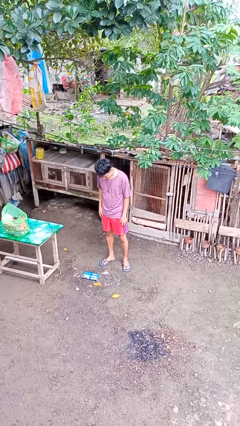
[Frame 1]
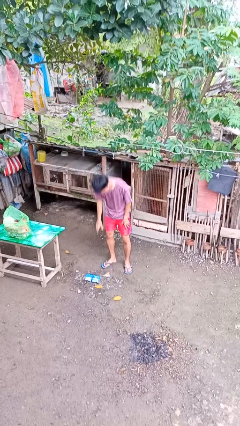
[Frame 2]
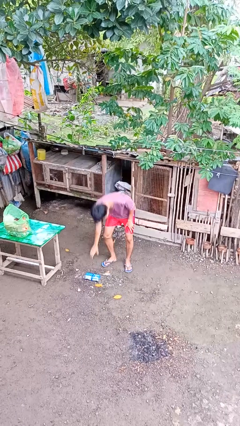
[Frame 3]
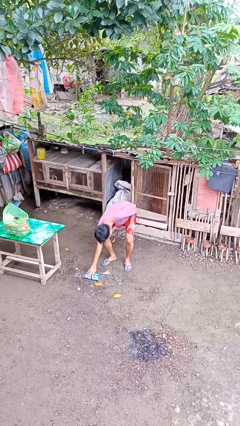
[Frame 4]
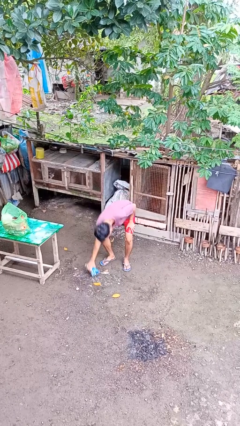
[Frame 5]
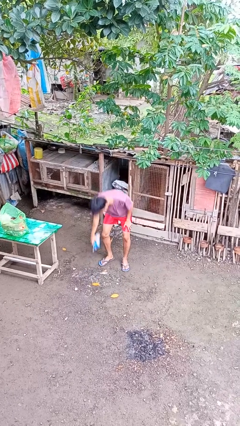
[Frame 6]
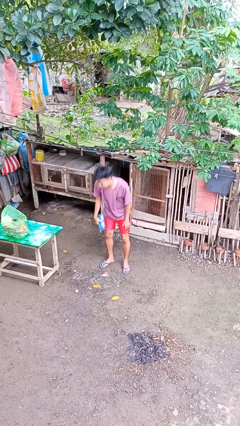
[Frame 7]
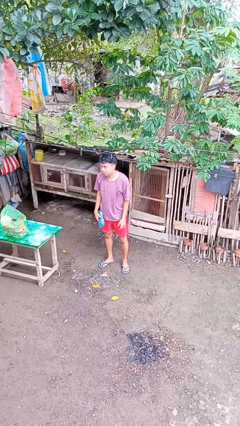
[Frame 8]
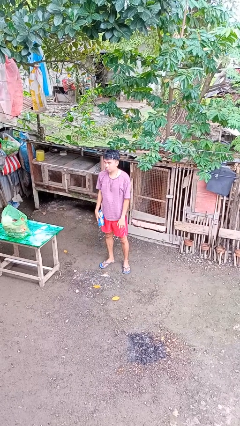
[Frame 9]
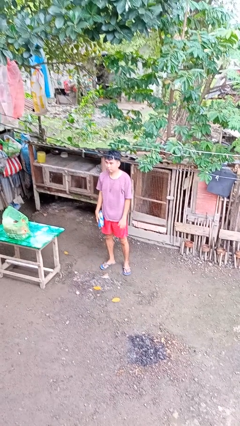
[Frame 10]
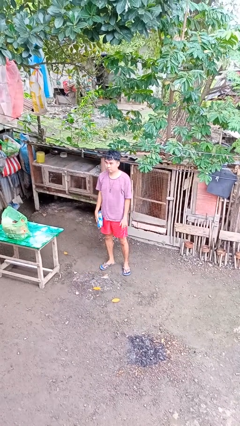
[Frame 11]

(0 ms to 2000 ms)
person picks up object from floor

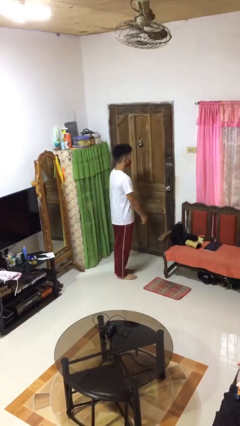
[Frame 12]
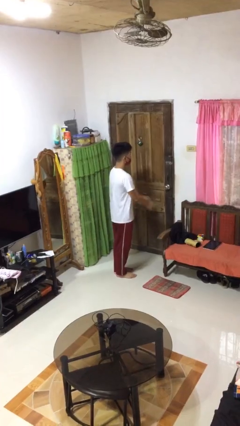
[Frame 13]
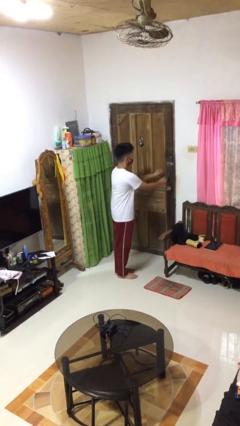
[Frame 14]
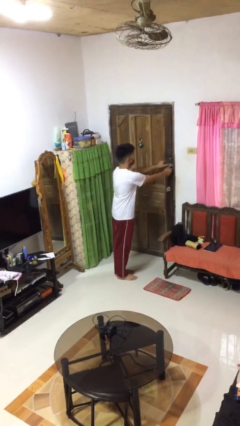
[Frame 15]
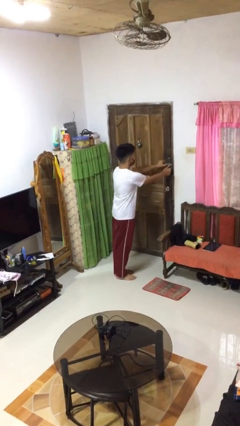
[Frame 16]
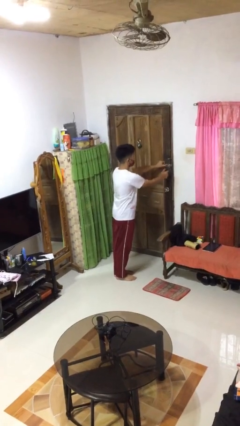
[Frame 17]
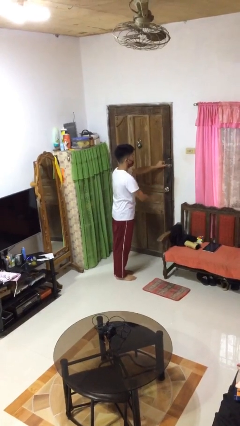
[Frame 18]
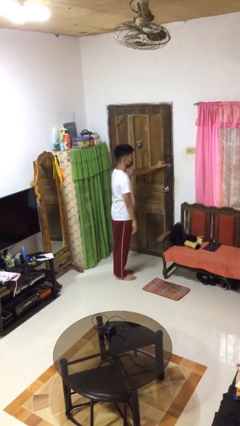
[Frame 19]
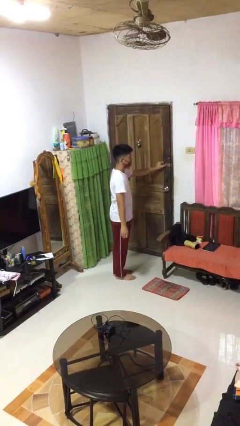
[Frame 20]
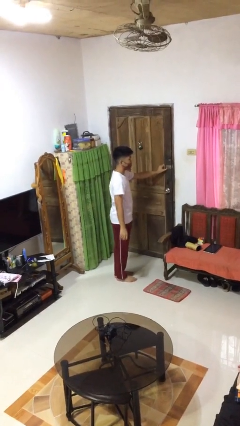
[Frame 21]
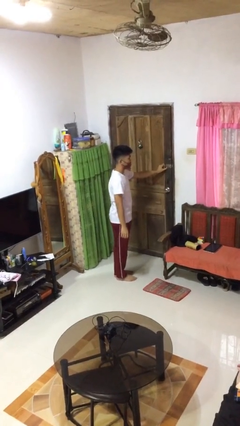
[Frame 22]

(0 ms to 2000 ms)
person unlocks door with keys

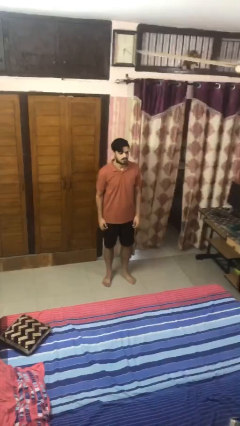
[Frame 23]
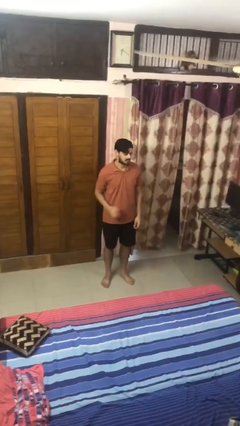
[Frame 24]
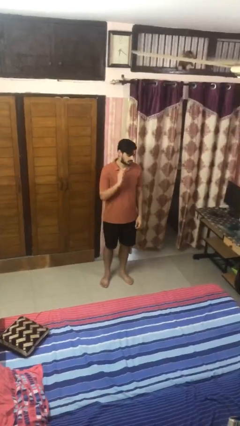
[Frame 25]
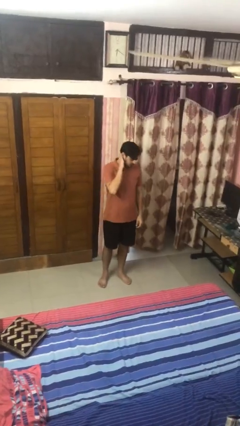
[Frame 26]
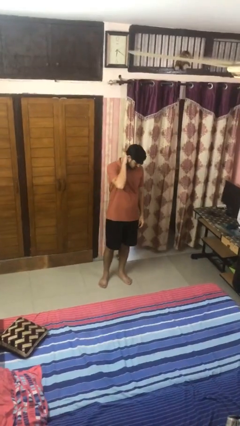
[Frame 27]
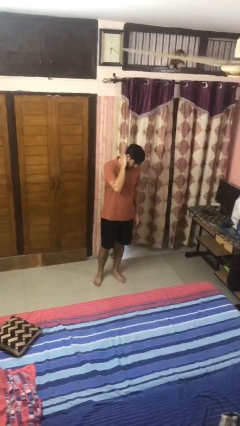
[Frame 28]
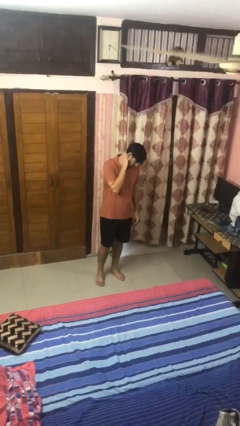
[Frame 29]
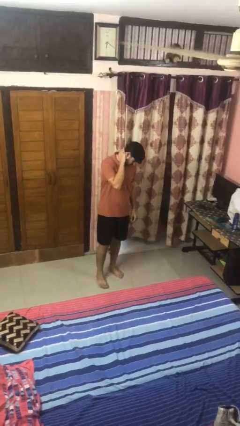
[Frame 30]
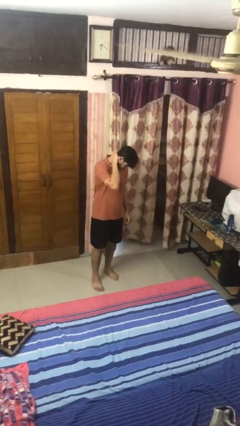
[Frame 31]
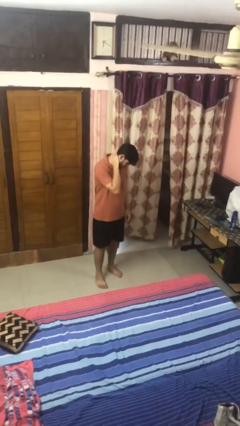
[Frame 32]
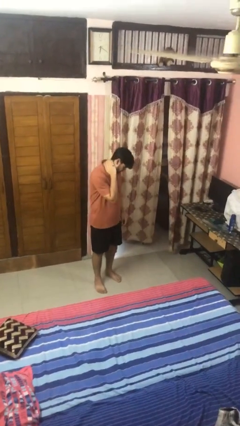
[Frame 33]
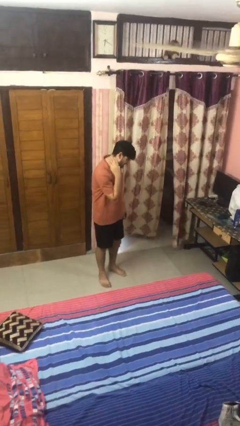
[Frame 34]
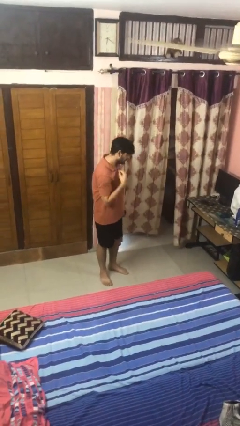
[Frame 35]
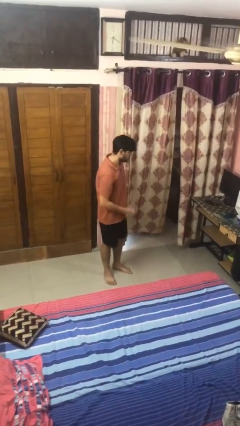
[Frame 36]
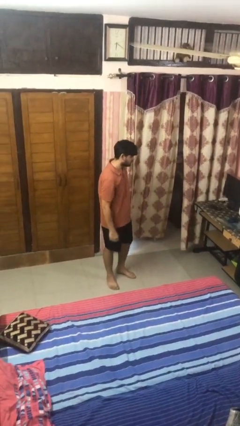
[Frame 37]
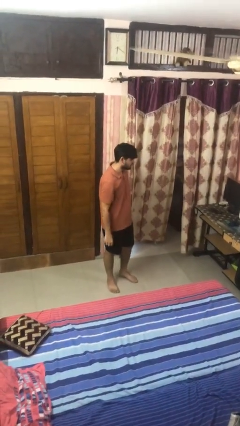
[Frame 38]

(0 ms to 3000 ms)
person rubs neck

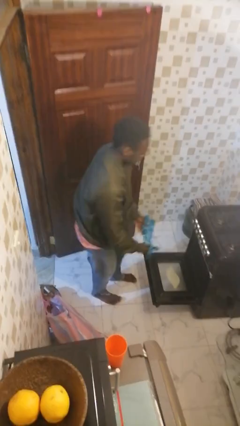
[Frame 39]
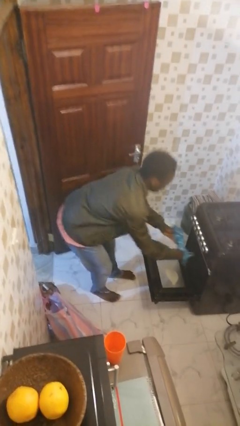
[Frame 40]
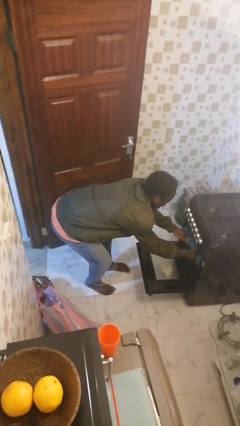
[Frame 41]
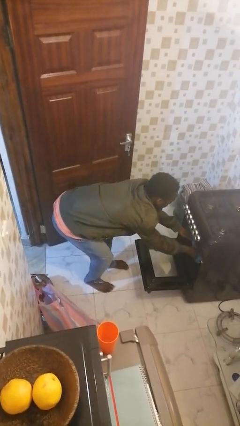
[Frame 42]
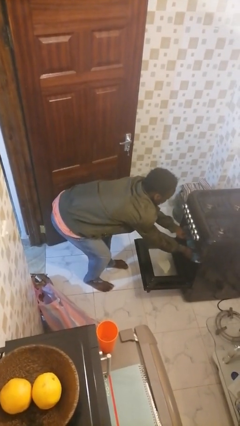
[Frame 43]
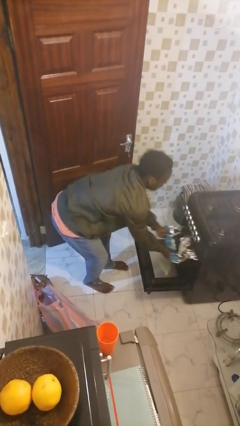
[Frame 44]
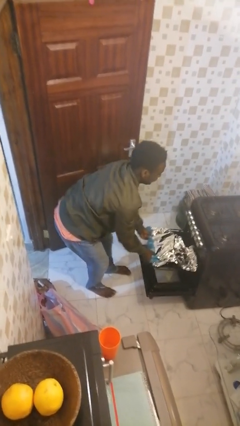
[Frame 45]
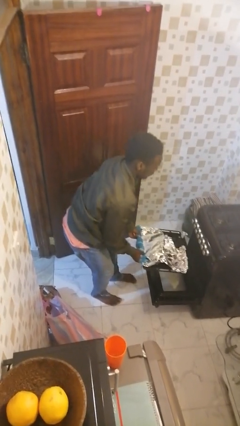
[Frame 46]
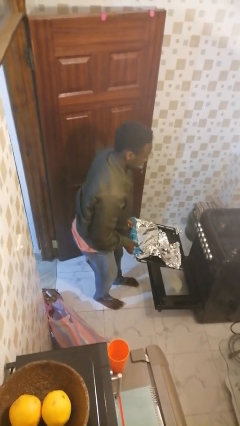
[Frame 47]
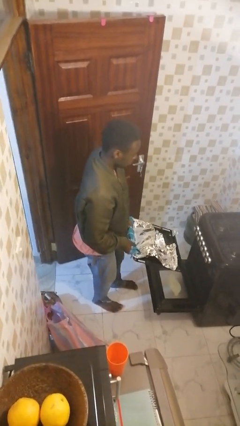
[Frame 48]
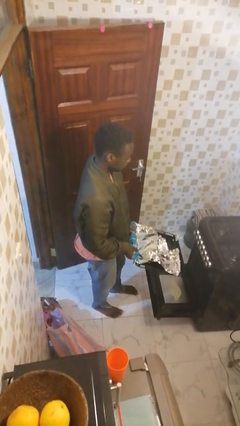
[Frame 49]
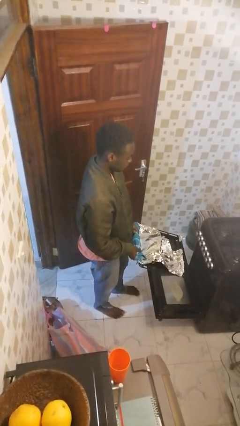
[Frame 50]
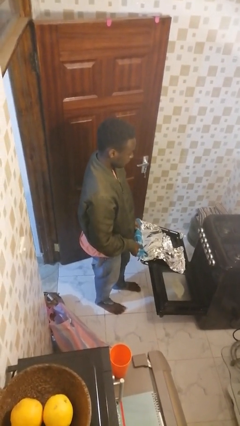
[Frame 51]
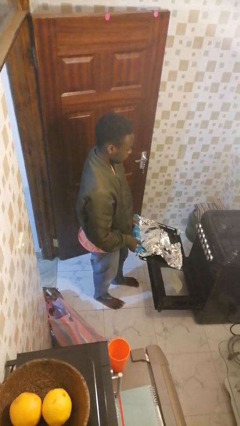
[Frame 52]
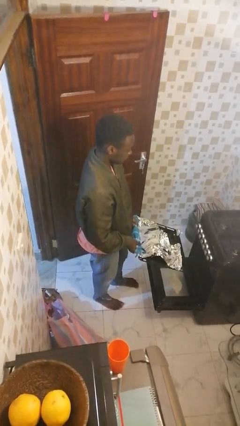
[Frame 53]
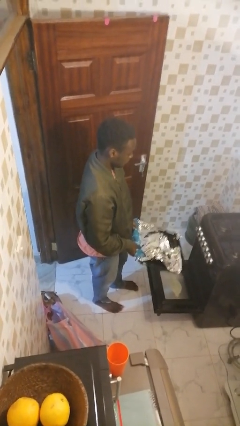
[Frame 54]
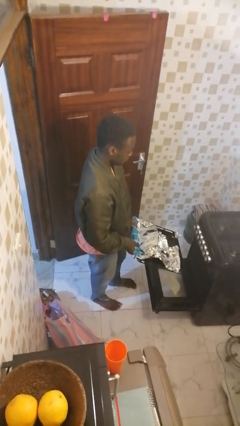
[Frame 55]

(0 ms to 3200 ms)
person takes object from oven

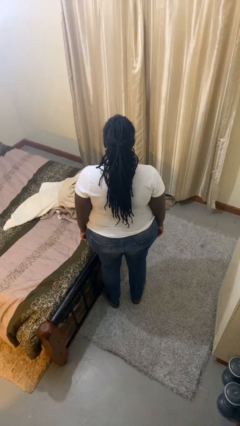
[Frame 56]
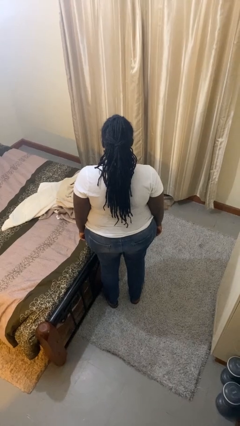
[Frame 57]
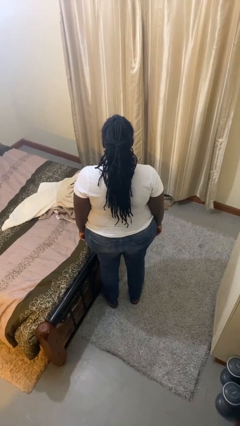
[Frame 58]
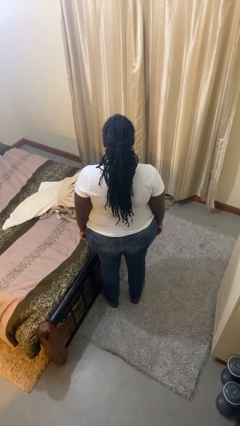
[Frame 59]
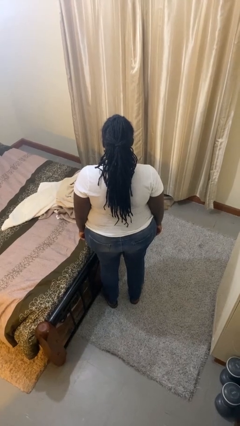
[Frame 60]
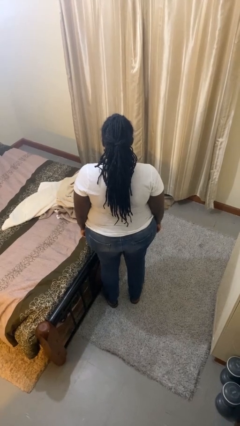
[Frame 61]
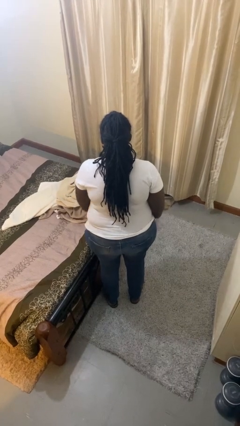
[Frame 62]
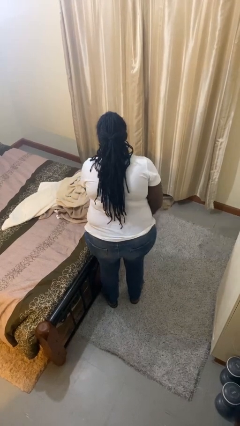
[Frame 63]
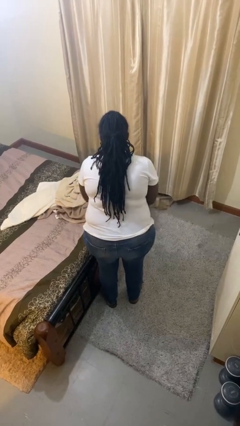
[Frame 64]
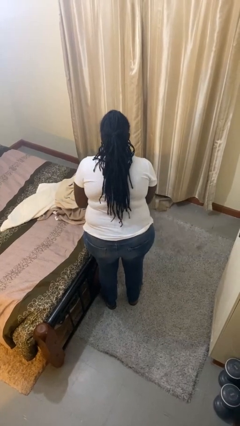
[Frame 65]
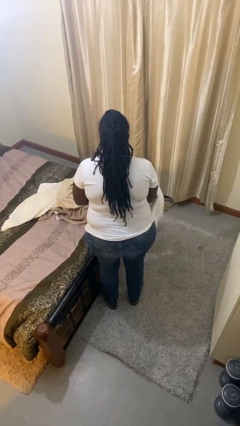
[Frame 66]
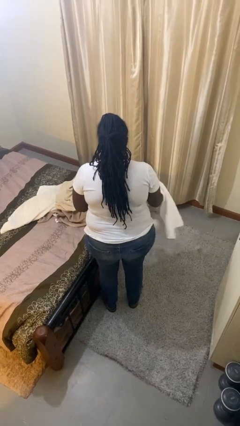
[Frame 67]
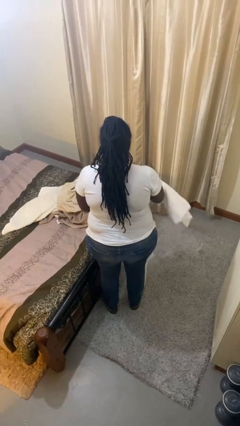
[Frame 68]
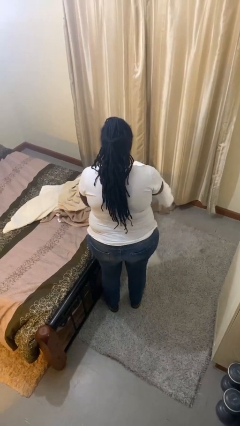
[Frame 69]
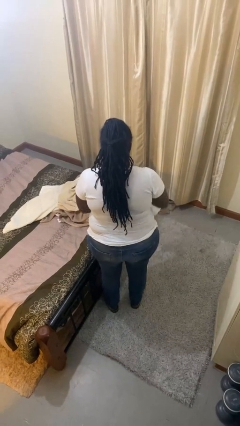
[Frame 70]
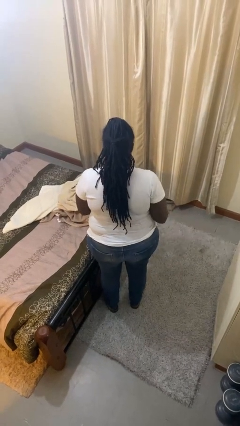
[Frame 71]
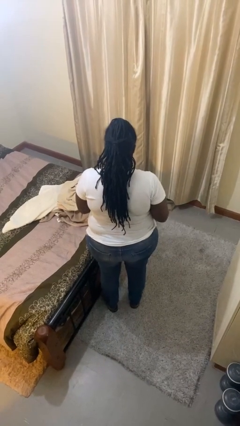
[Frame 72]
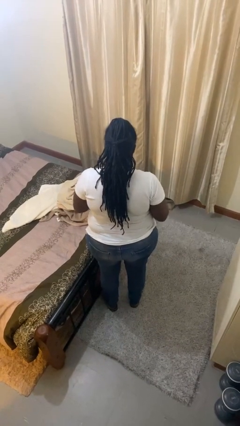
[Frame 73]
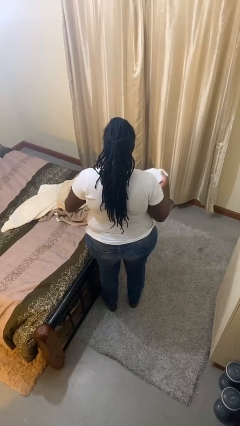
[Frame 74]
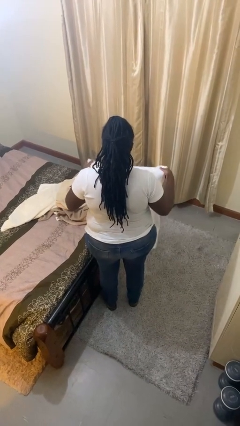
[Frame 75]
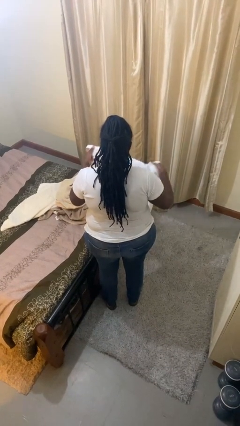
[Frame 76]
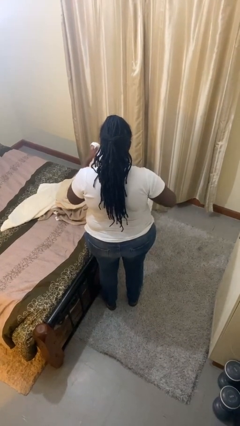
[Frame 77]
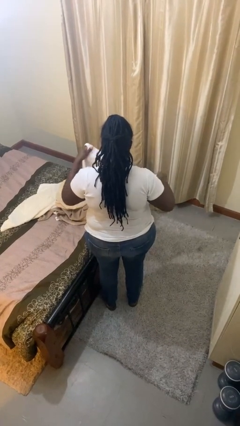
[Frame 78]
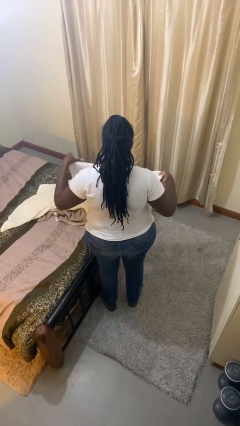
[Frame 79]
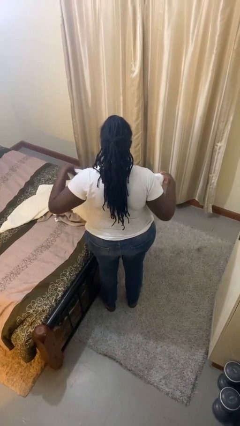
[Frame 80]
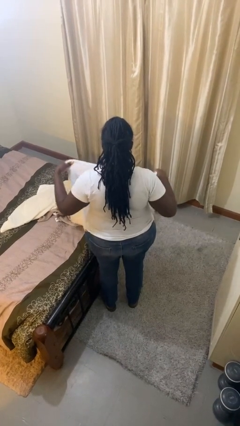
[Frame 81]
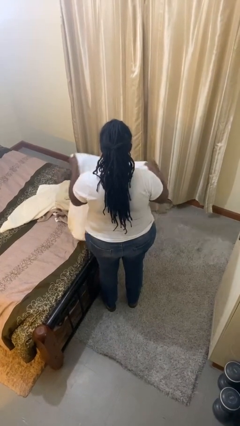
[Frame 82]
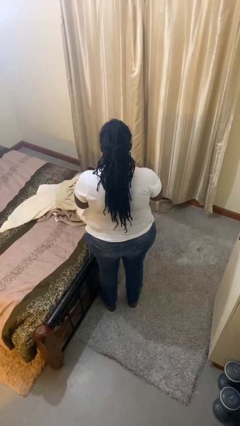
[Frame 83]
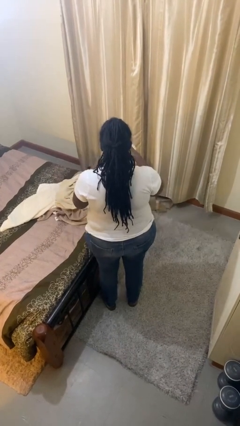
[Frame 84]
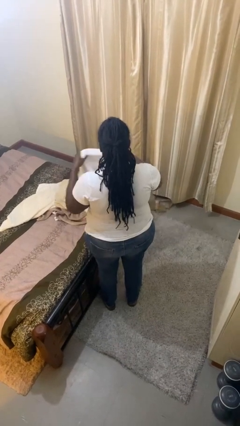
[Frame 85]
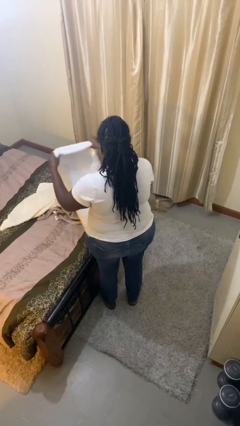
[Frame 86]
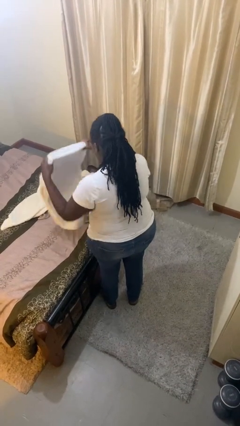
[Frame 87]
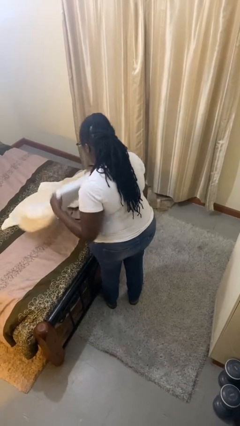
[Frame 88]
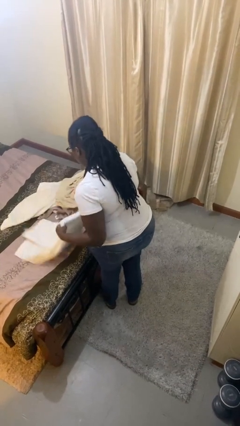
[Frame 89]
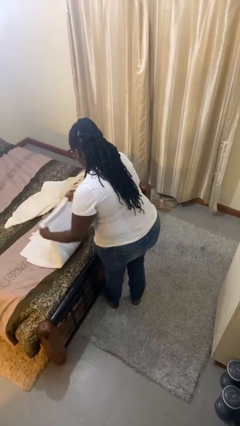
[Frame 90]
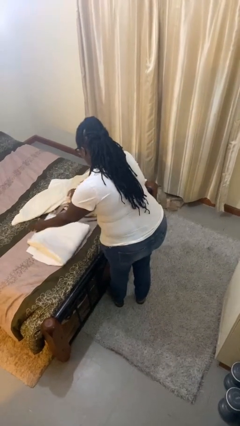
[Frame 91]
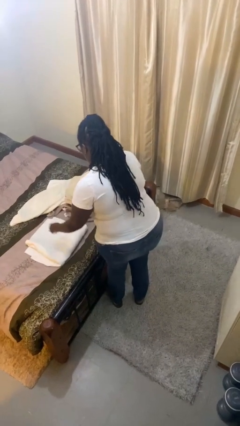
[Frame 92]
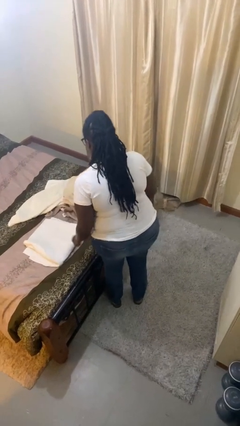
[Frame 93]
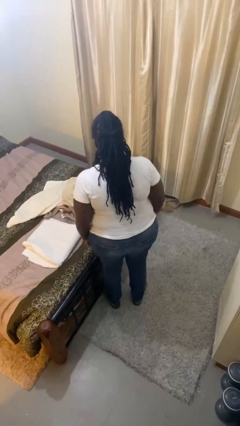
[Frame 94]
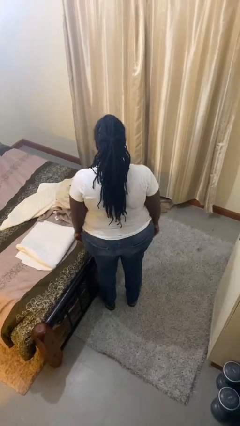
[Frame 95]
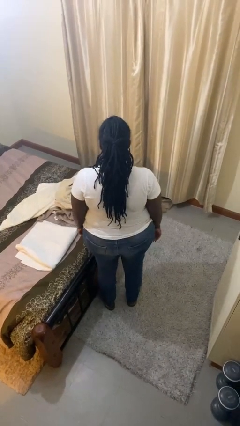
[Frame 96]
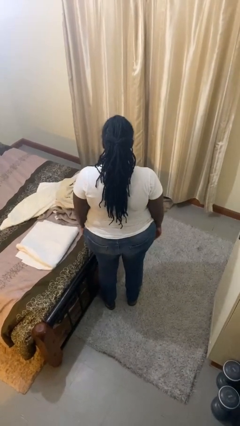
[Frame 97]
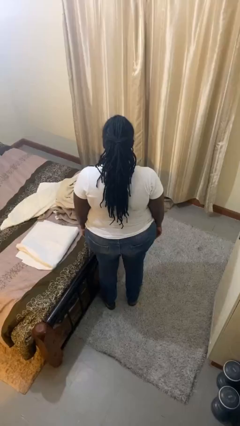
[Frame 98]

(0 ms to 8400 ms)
person folds towel
